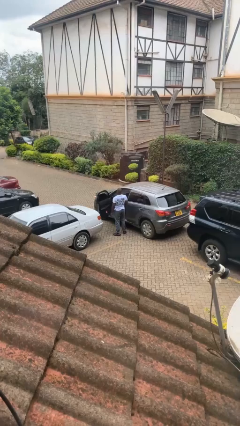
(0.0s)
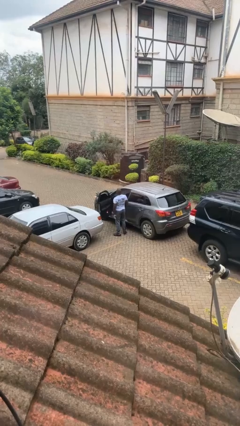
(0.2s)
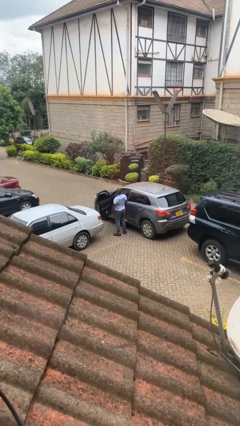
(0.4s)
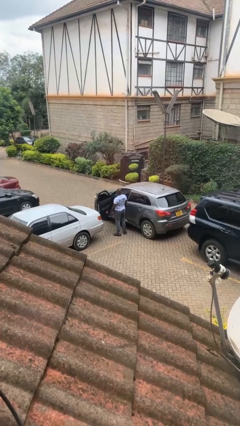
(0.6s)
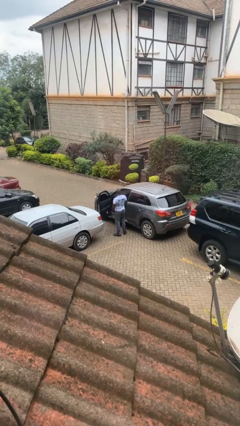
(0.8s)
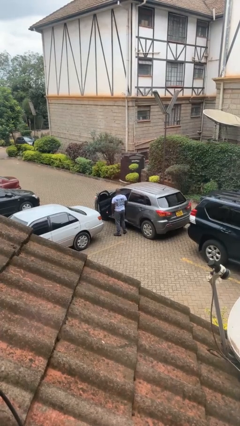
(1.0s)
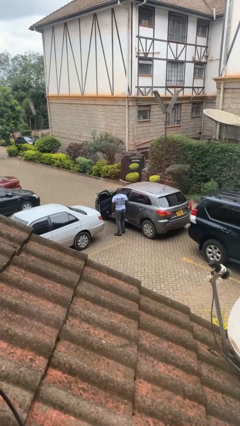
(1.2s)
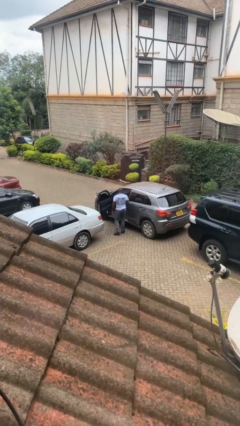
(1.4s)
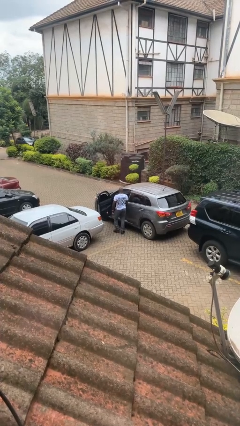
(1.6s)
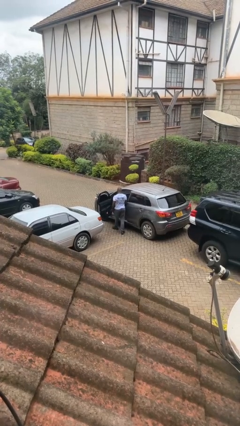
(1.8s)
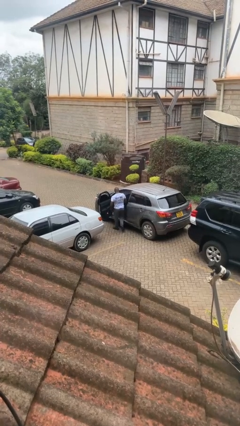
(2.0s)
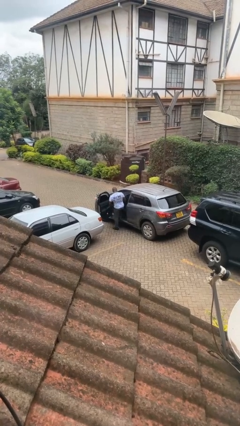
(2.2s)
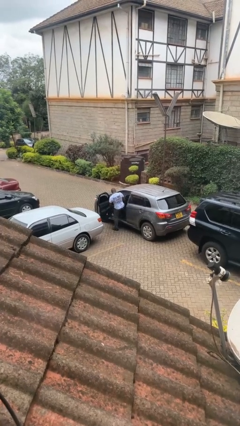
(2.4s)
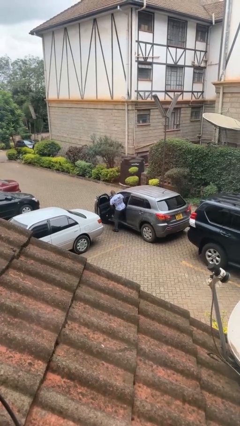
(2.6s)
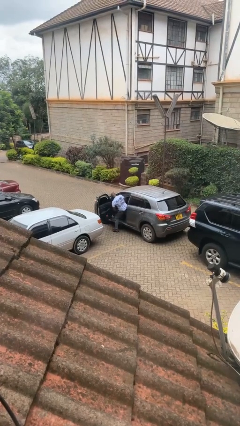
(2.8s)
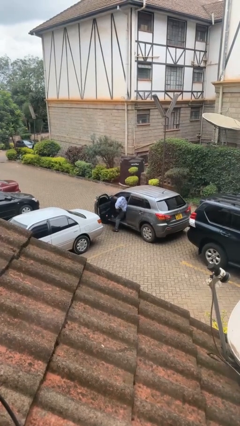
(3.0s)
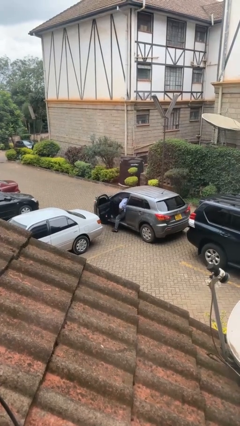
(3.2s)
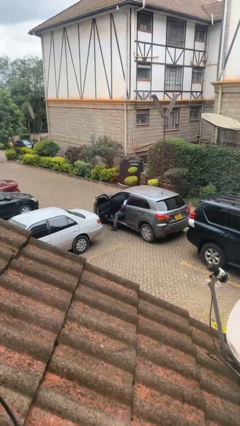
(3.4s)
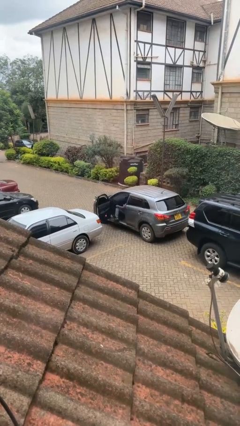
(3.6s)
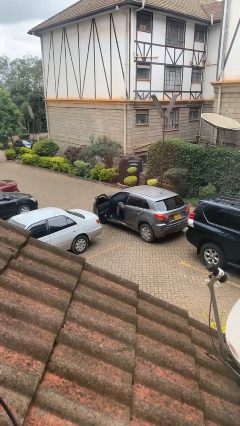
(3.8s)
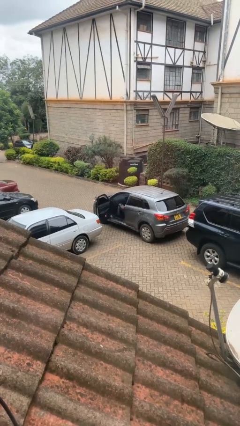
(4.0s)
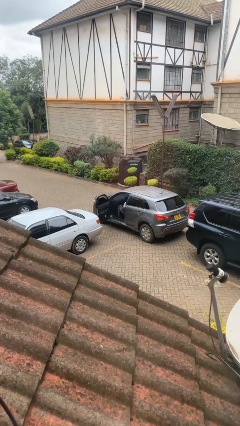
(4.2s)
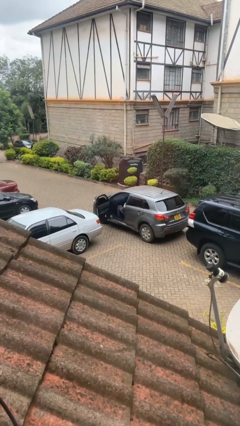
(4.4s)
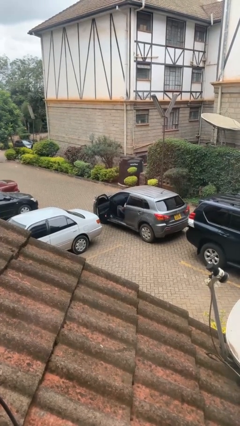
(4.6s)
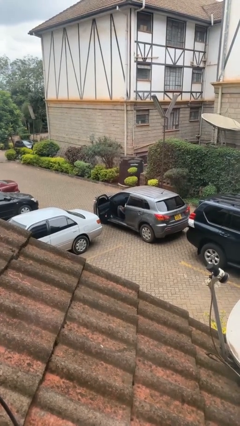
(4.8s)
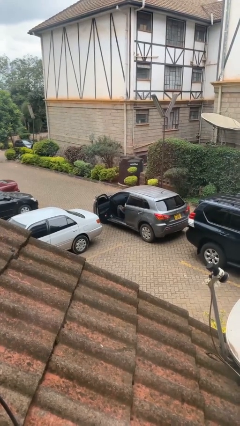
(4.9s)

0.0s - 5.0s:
person enters car

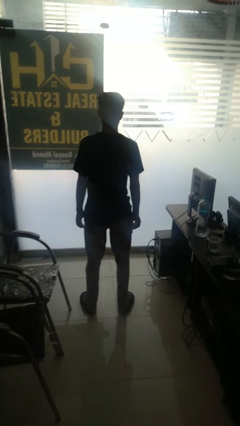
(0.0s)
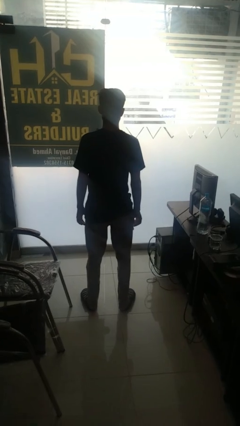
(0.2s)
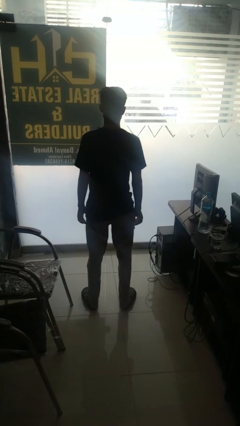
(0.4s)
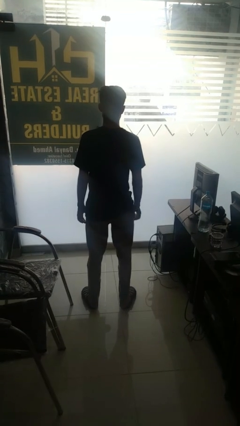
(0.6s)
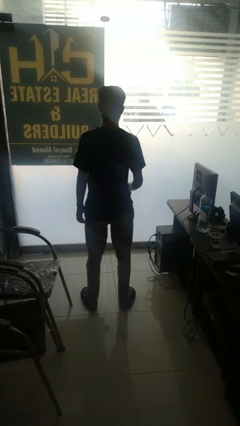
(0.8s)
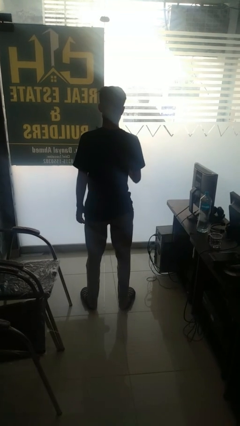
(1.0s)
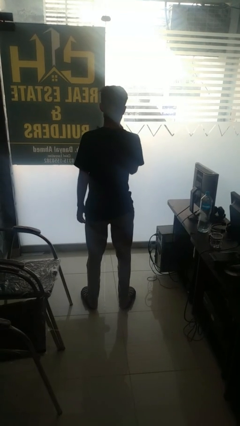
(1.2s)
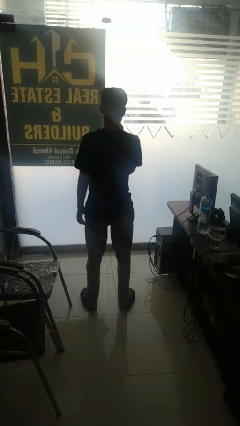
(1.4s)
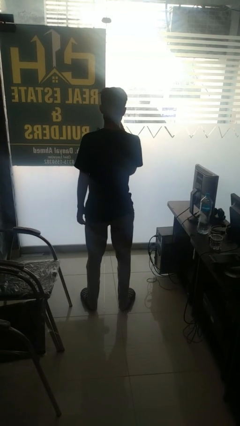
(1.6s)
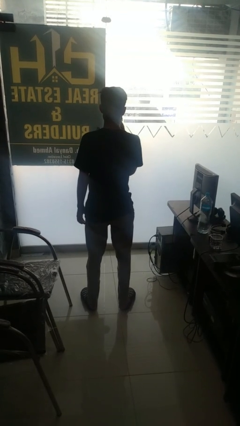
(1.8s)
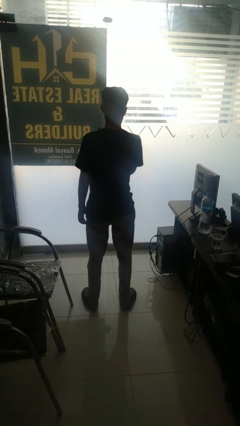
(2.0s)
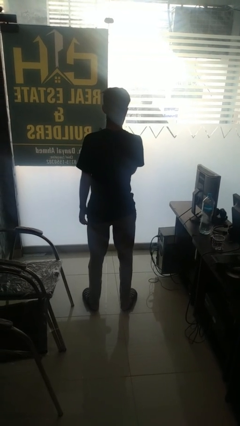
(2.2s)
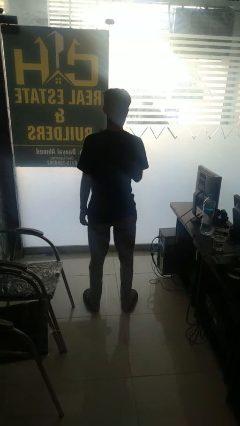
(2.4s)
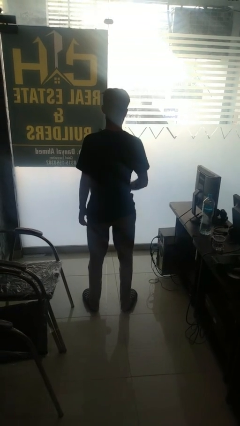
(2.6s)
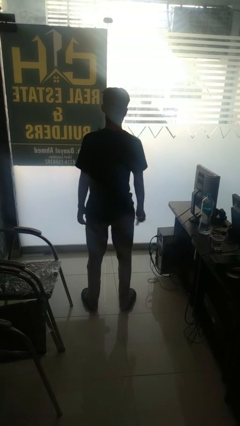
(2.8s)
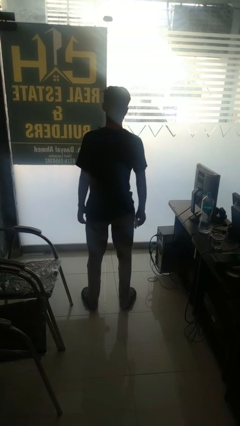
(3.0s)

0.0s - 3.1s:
person wipes mouth with napkin

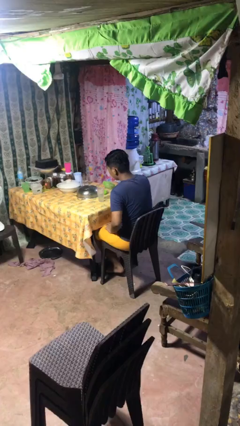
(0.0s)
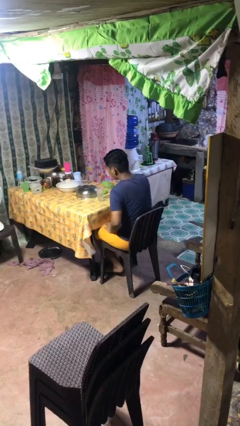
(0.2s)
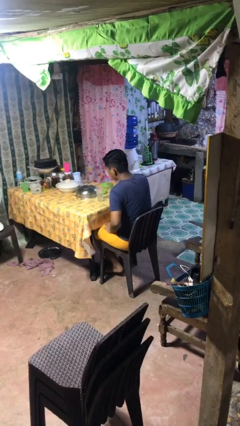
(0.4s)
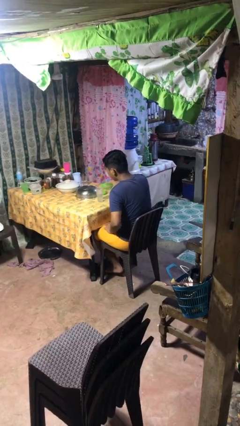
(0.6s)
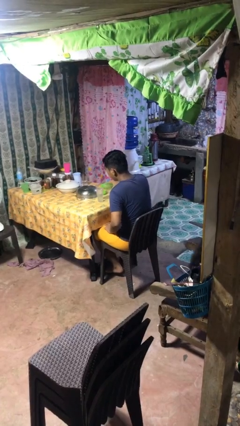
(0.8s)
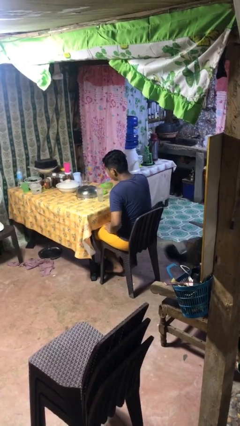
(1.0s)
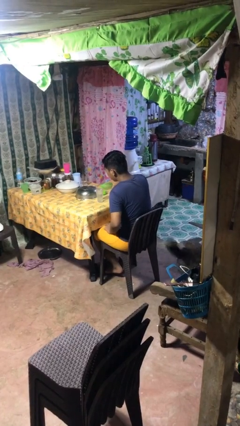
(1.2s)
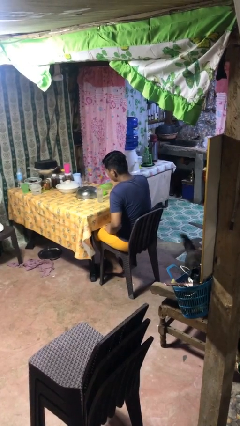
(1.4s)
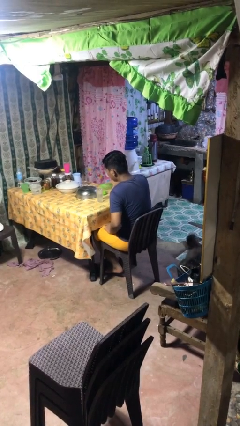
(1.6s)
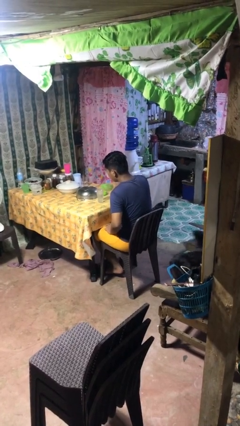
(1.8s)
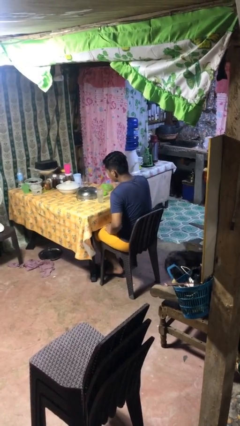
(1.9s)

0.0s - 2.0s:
person pours liquid into cup

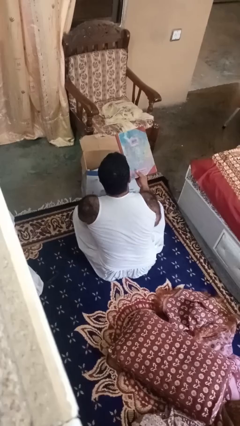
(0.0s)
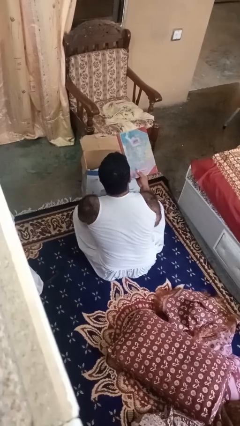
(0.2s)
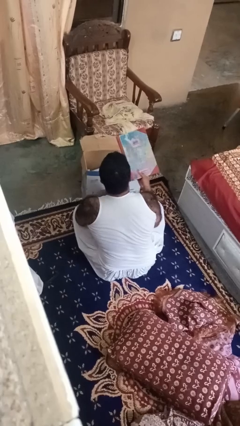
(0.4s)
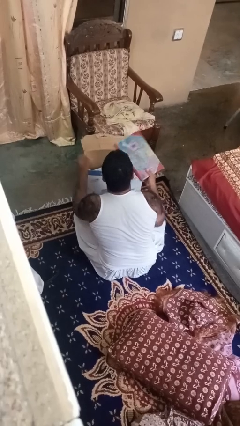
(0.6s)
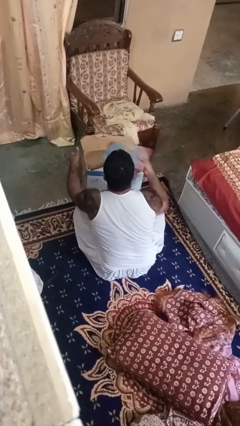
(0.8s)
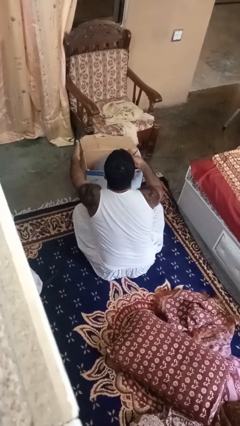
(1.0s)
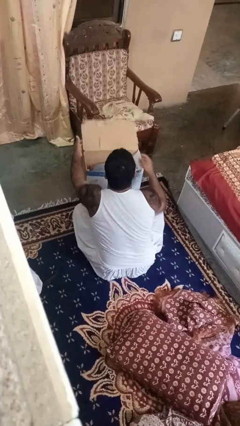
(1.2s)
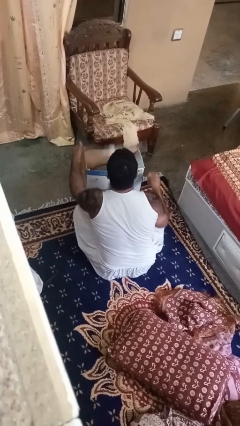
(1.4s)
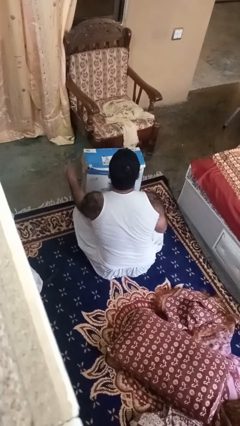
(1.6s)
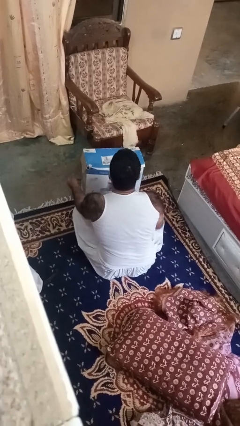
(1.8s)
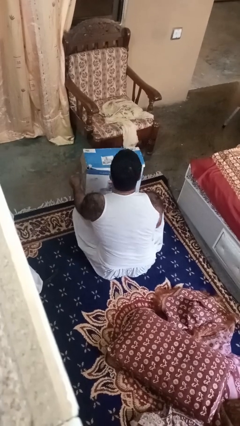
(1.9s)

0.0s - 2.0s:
person puts object into box

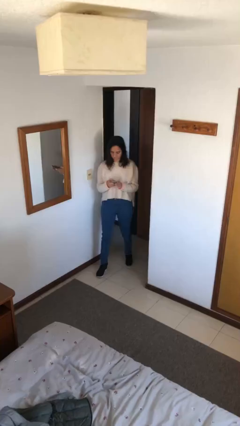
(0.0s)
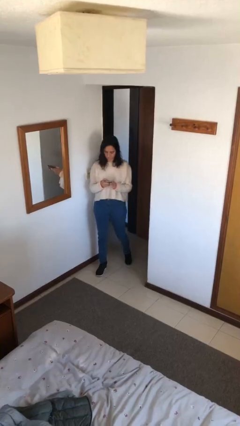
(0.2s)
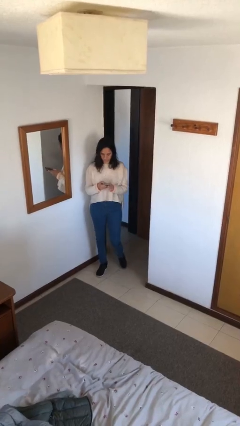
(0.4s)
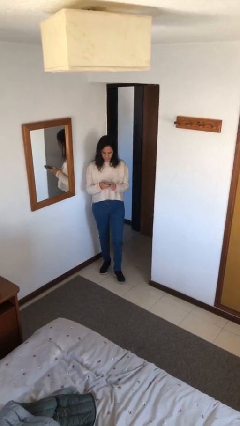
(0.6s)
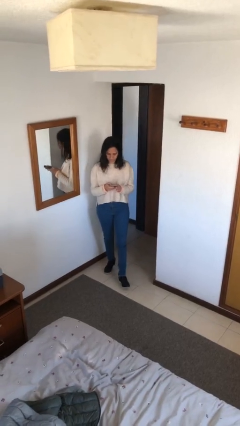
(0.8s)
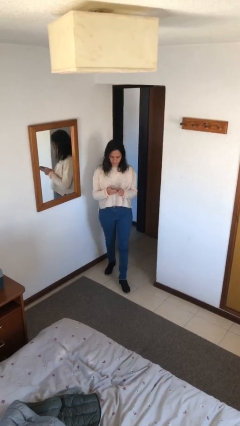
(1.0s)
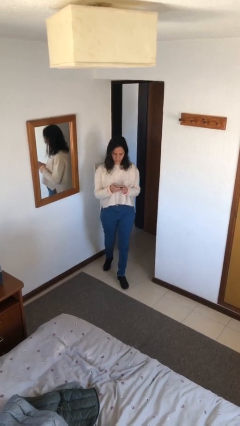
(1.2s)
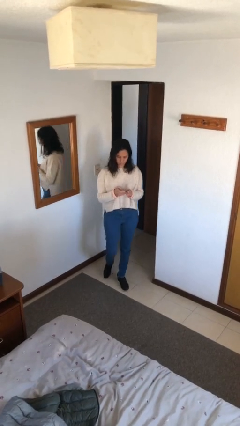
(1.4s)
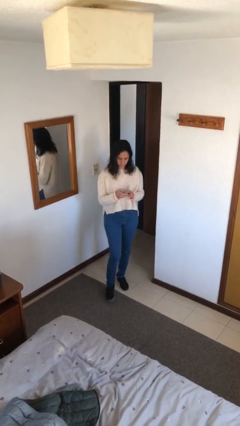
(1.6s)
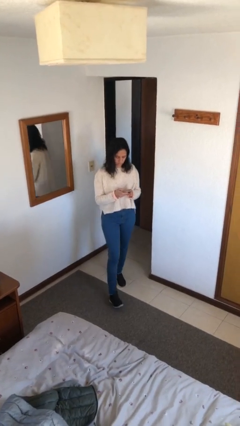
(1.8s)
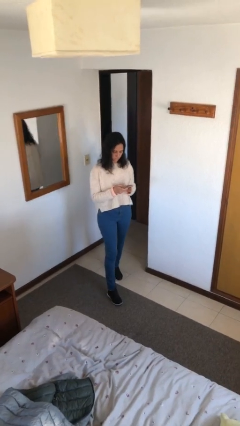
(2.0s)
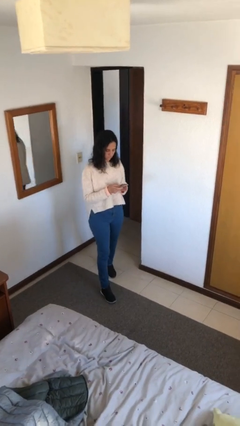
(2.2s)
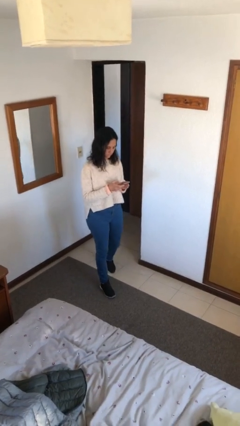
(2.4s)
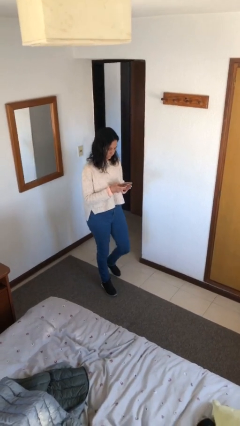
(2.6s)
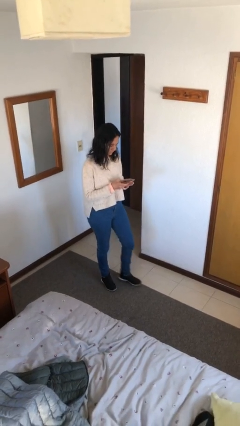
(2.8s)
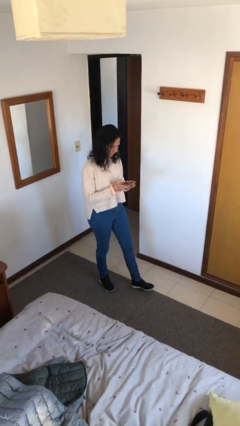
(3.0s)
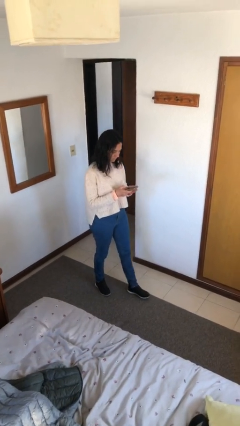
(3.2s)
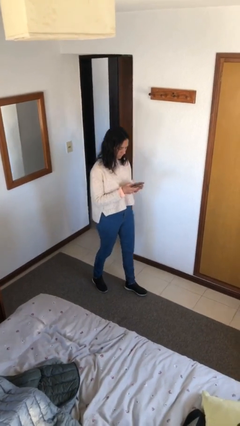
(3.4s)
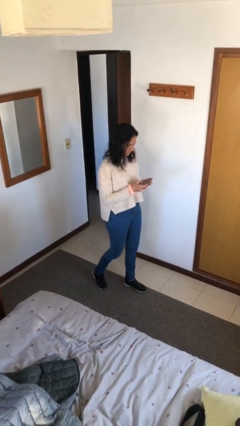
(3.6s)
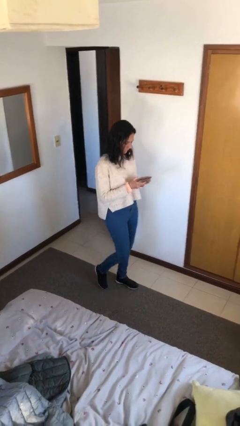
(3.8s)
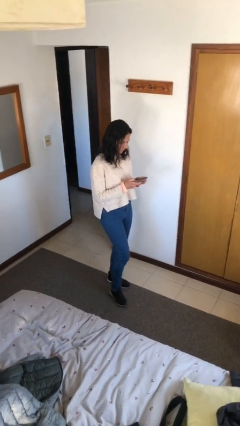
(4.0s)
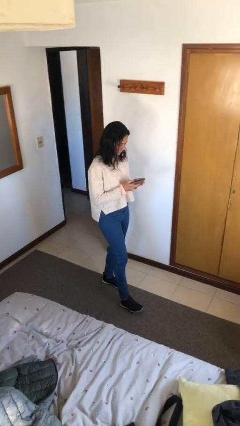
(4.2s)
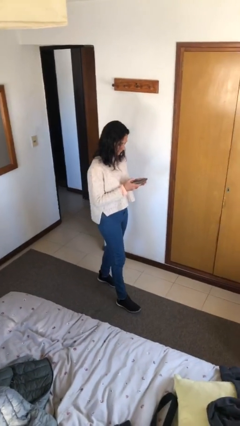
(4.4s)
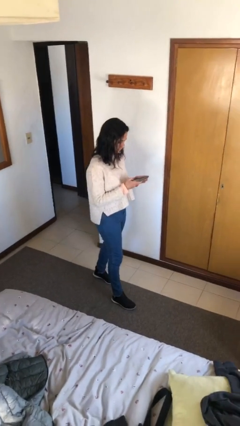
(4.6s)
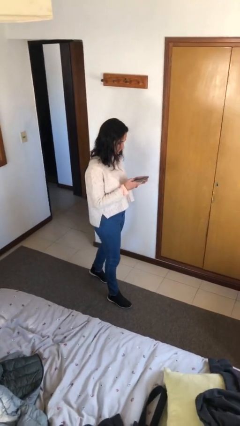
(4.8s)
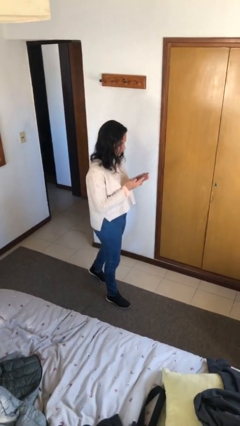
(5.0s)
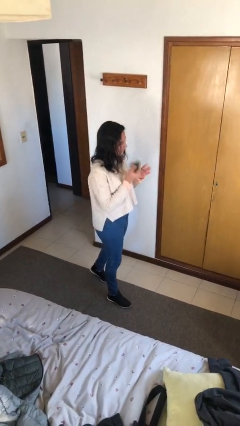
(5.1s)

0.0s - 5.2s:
person texts on phone

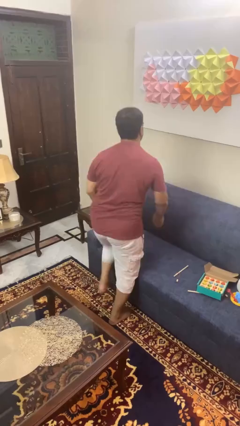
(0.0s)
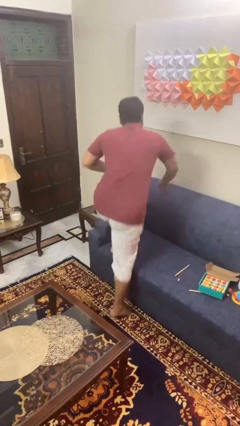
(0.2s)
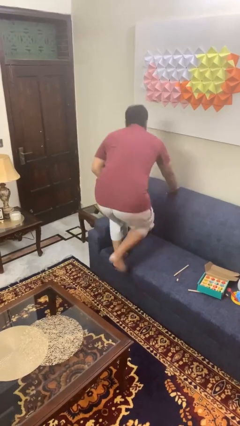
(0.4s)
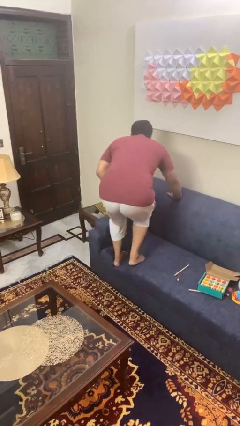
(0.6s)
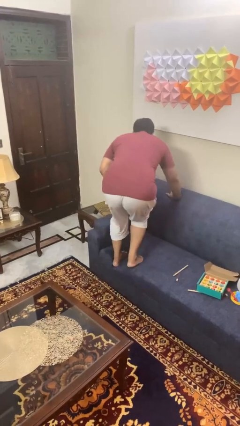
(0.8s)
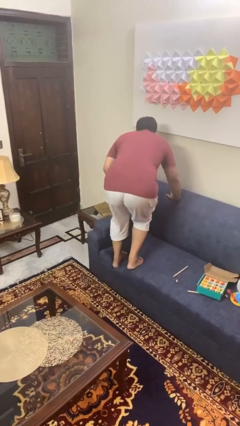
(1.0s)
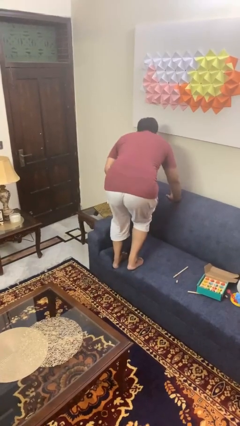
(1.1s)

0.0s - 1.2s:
person jumps on couch
